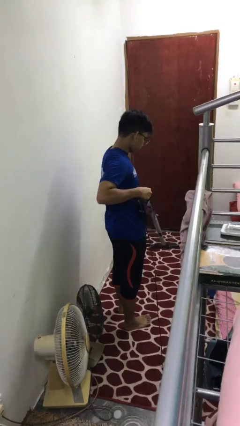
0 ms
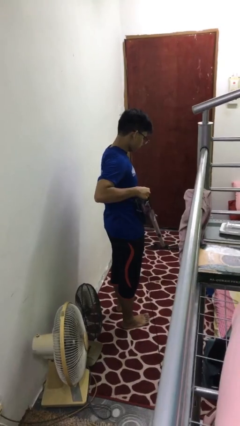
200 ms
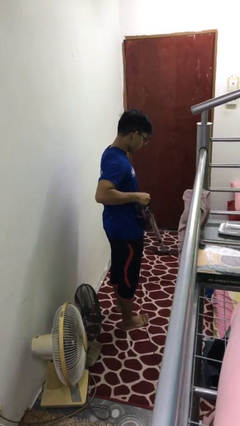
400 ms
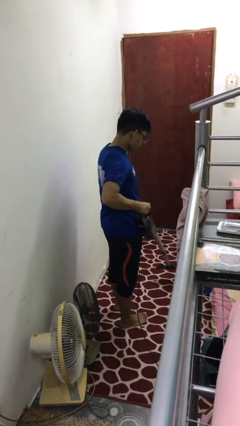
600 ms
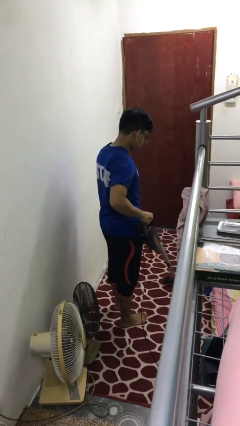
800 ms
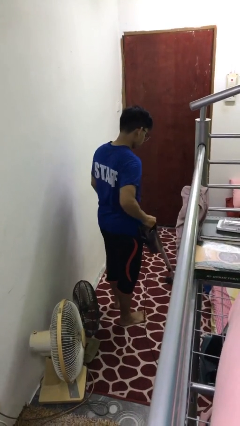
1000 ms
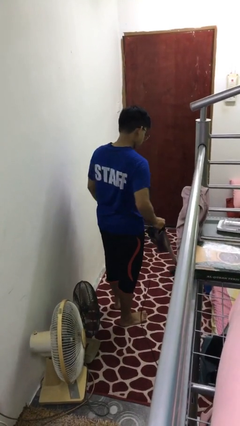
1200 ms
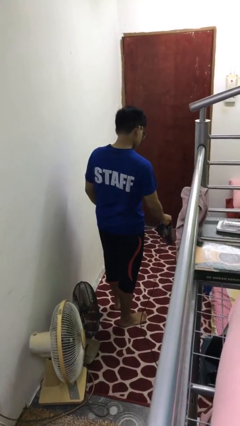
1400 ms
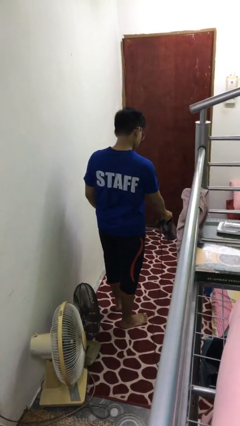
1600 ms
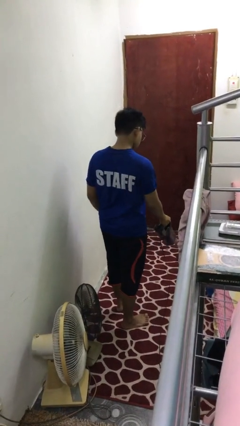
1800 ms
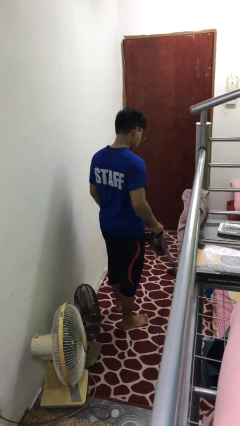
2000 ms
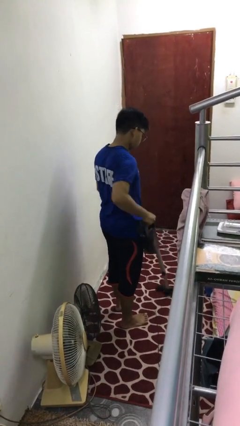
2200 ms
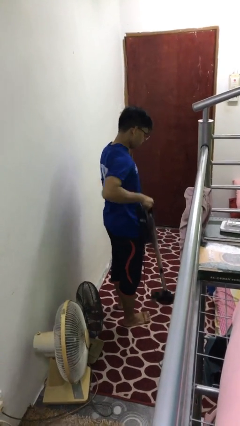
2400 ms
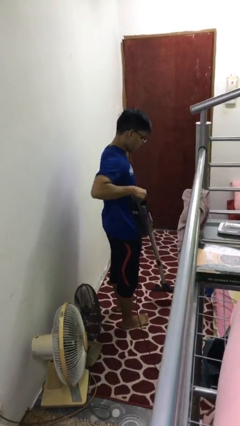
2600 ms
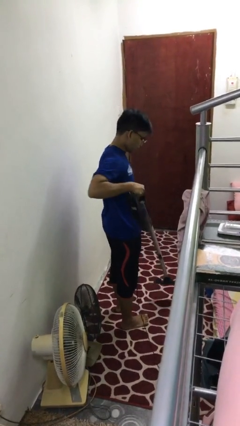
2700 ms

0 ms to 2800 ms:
person vacuums carpet

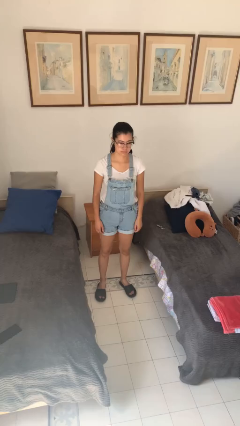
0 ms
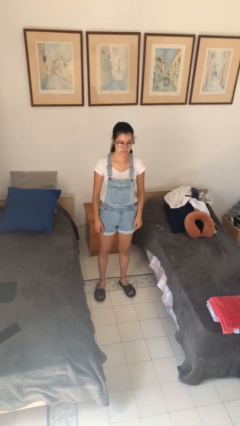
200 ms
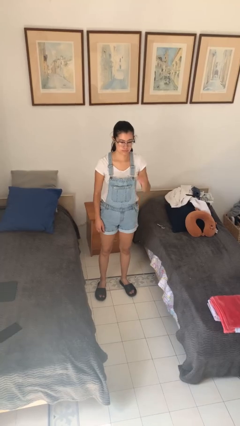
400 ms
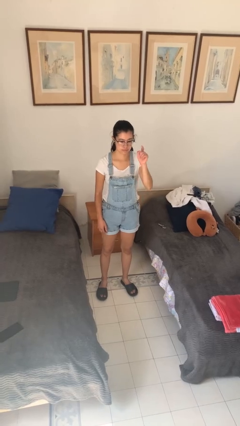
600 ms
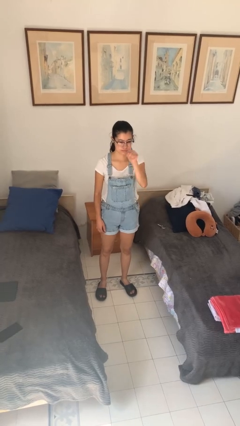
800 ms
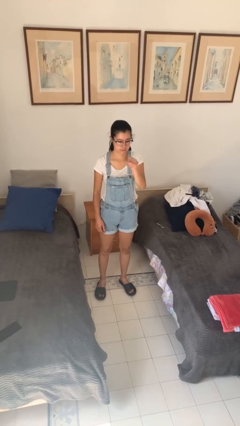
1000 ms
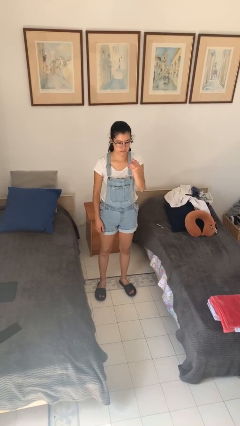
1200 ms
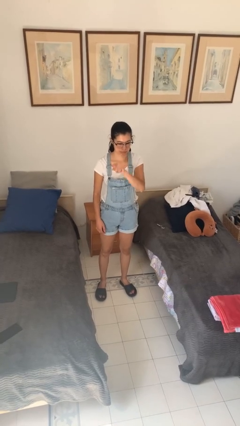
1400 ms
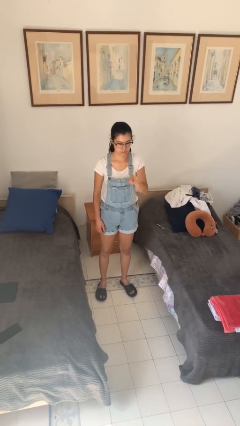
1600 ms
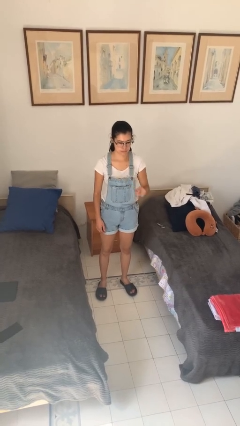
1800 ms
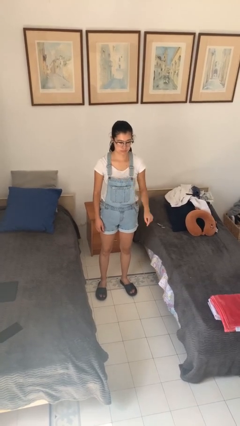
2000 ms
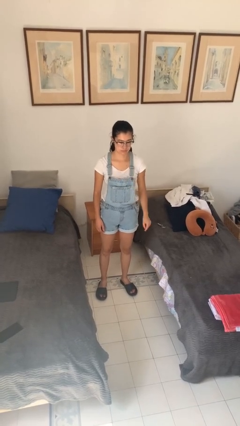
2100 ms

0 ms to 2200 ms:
person gestures number three

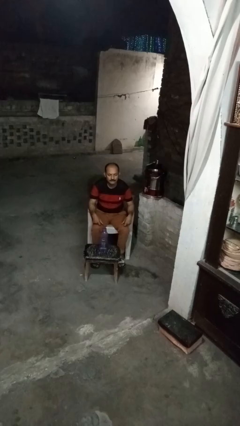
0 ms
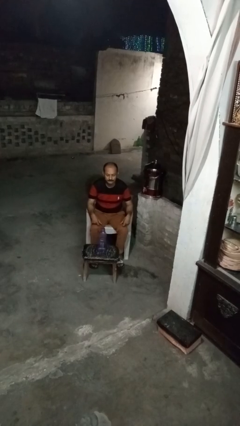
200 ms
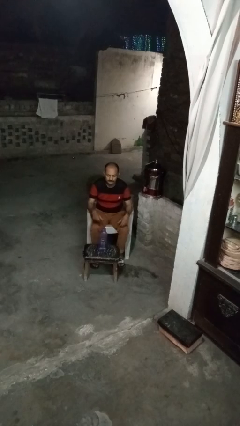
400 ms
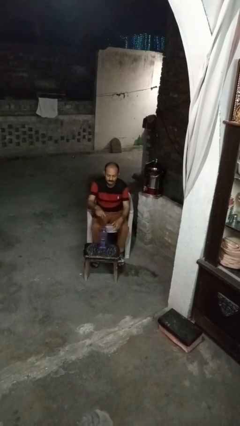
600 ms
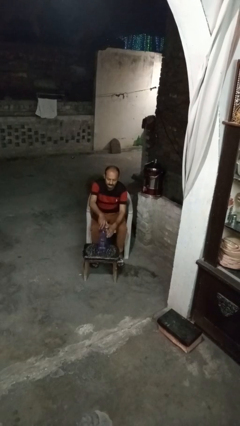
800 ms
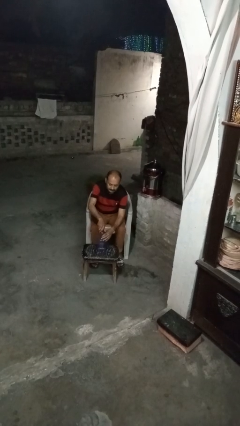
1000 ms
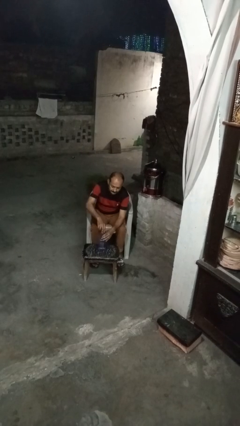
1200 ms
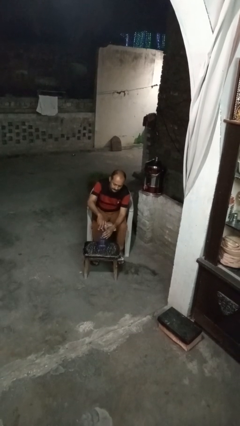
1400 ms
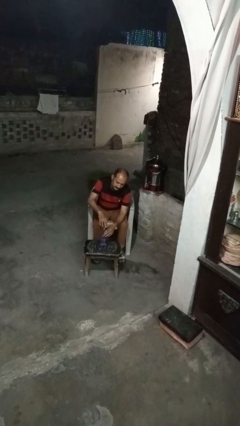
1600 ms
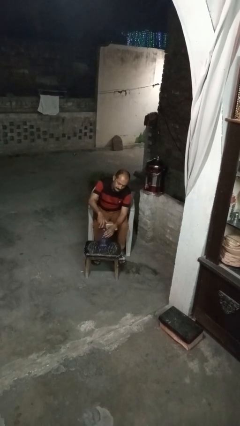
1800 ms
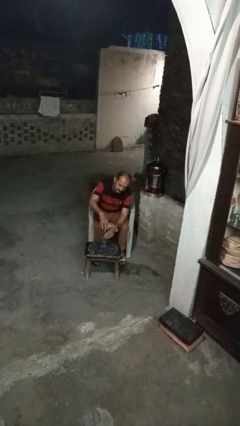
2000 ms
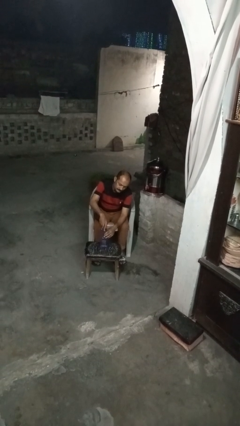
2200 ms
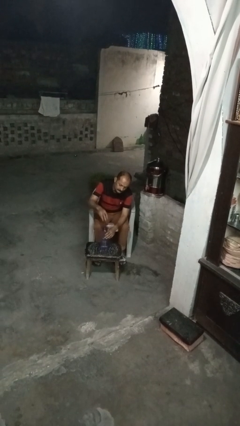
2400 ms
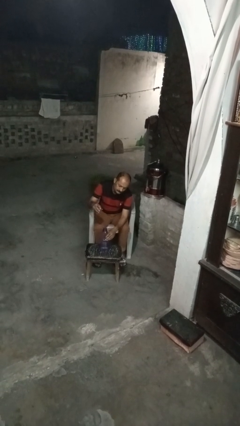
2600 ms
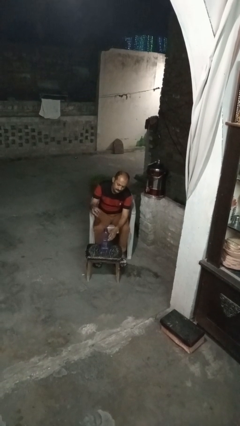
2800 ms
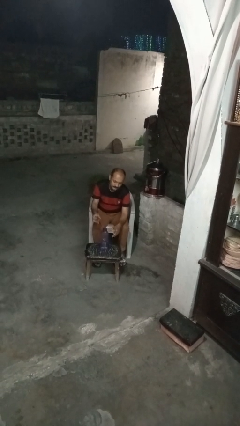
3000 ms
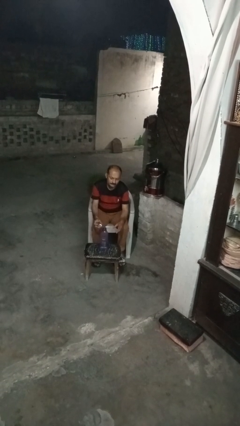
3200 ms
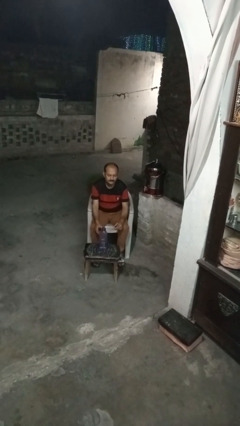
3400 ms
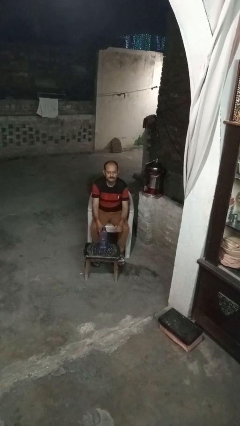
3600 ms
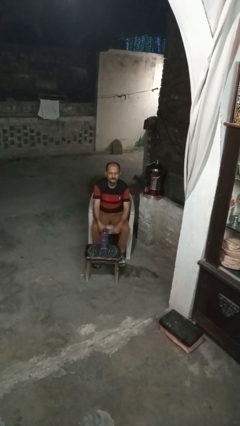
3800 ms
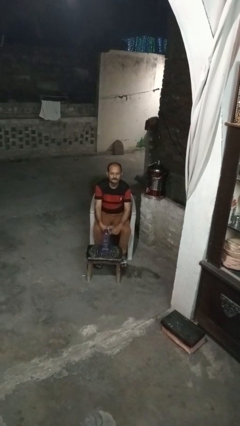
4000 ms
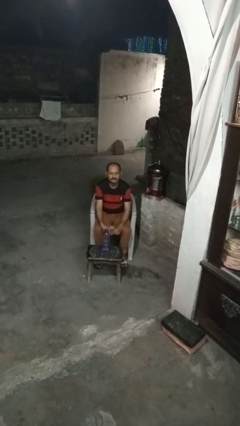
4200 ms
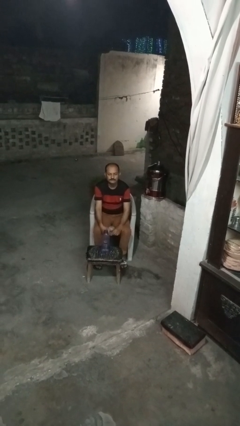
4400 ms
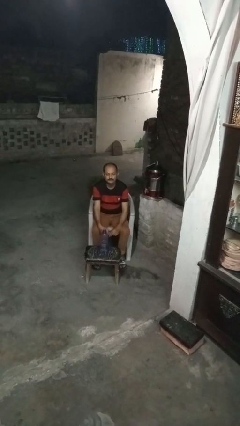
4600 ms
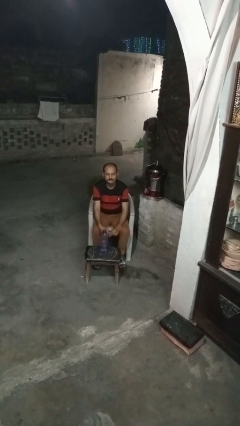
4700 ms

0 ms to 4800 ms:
person unscrews lid from bottle

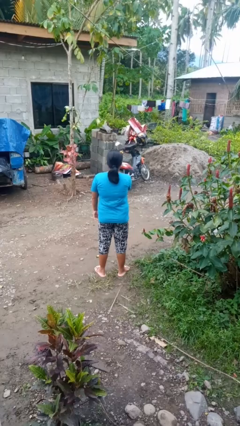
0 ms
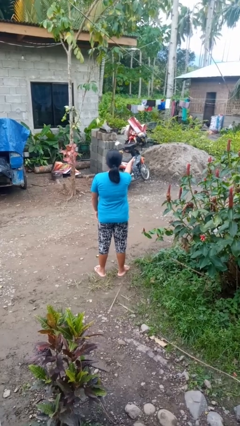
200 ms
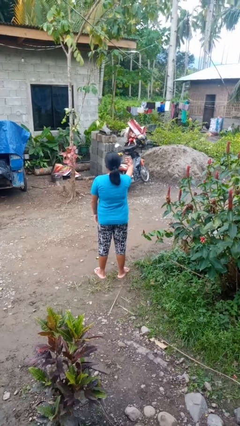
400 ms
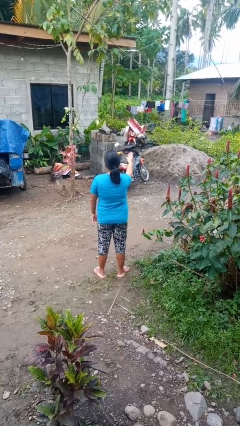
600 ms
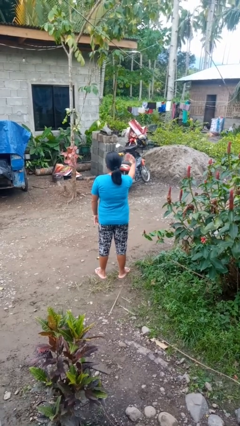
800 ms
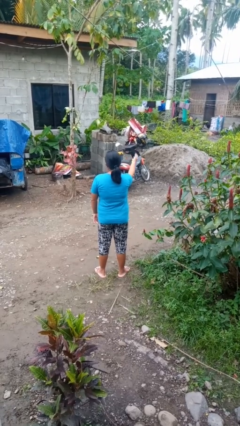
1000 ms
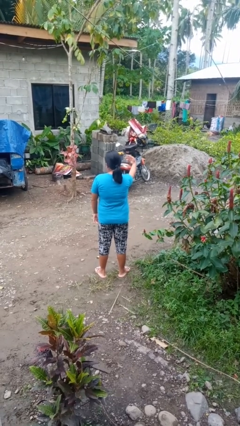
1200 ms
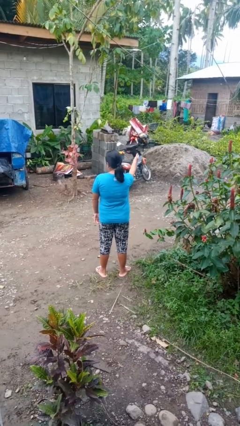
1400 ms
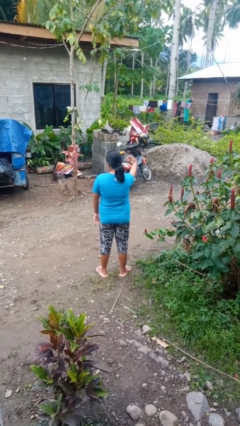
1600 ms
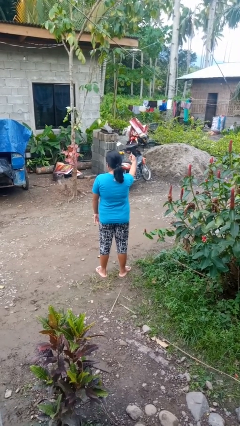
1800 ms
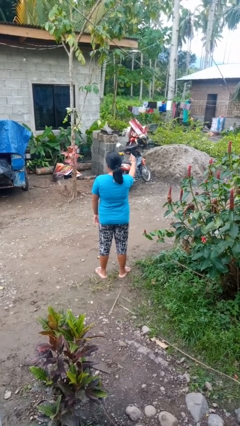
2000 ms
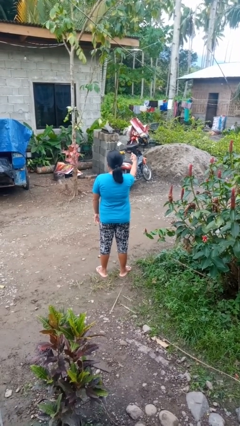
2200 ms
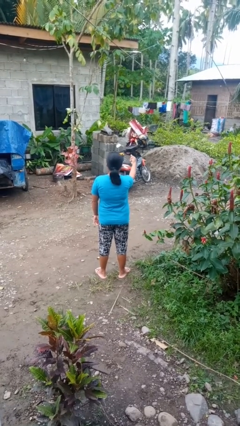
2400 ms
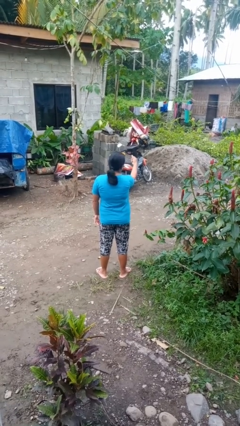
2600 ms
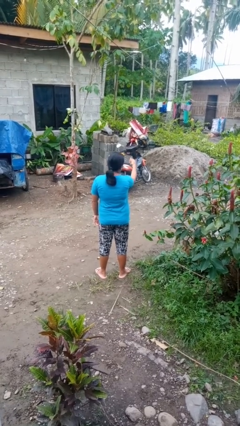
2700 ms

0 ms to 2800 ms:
person gestures come here

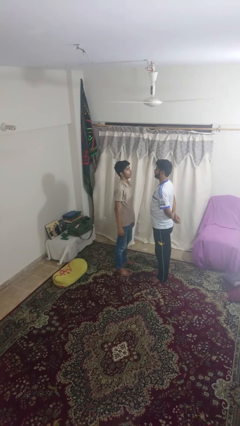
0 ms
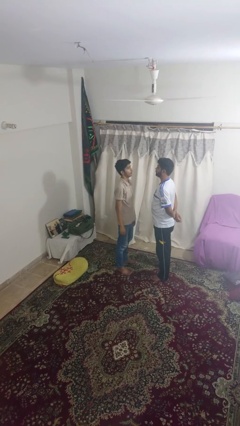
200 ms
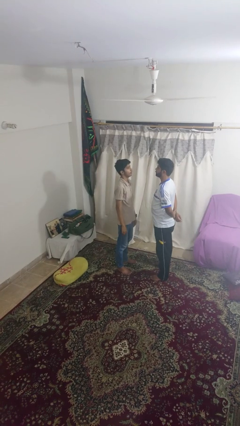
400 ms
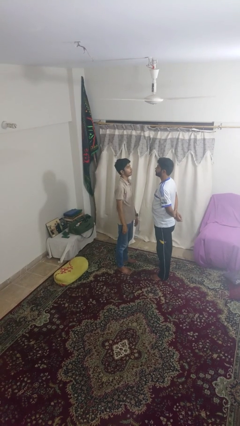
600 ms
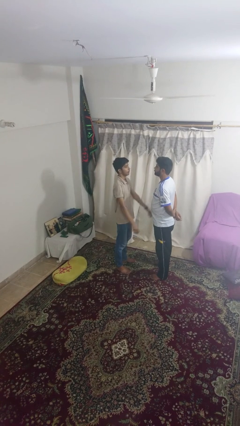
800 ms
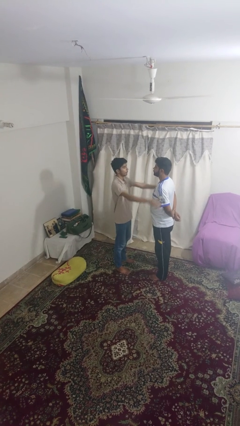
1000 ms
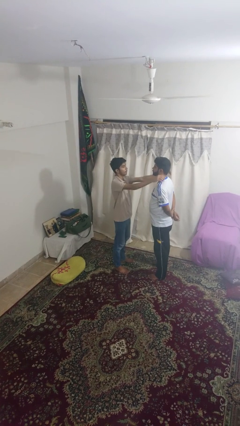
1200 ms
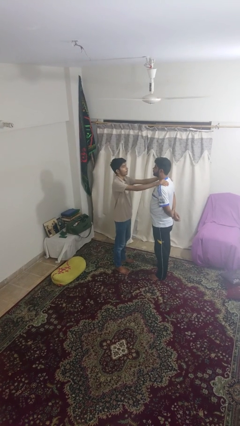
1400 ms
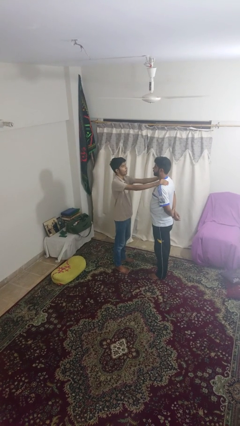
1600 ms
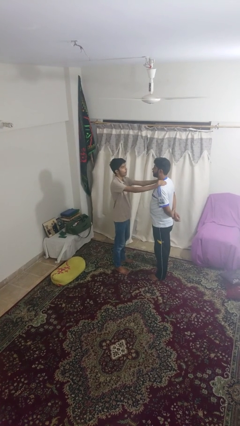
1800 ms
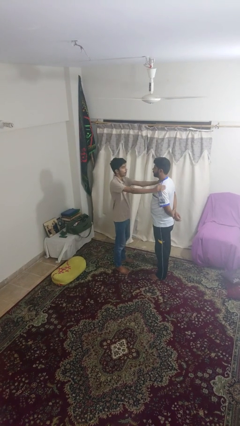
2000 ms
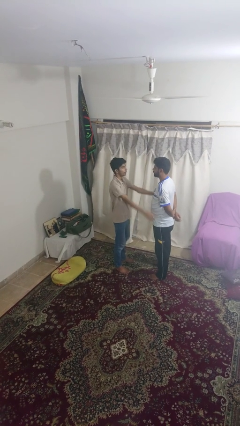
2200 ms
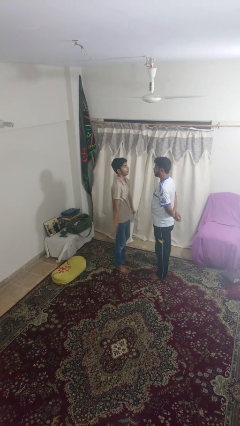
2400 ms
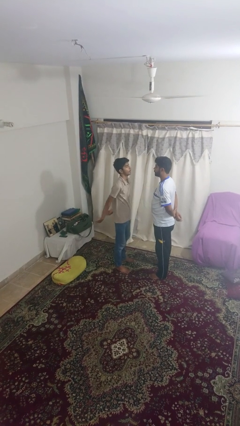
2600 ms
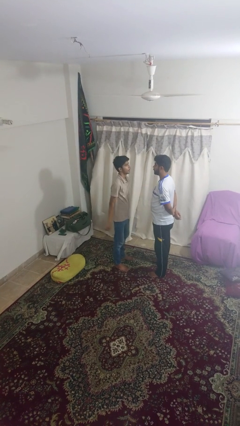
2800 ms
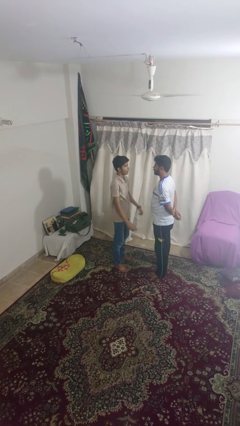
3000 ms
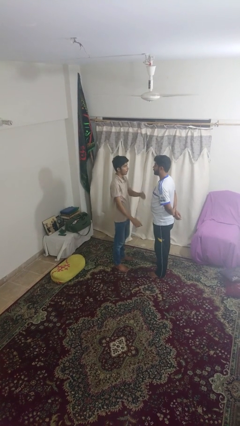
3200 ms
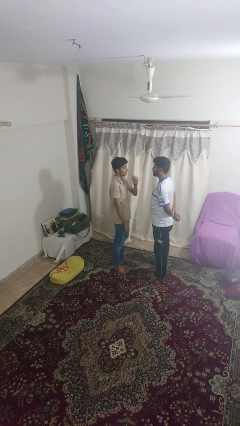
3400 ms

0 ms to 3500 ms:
person pounds shoulders of person

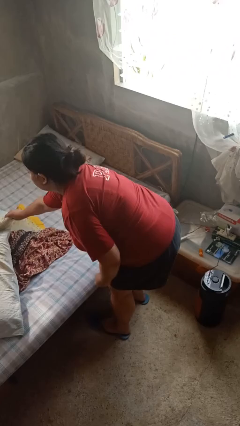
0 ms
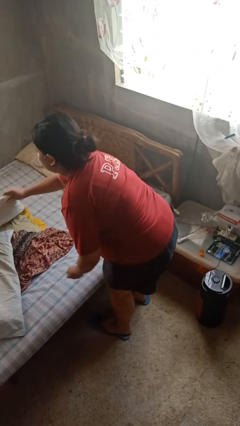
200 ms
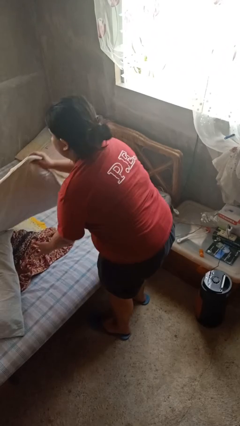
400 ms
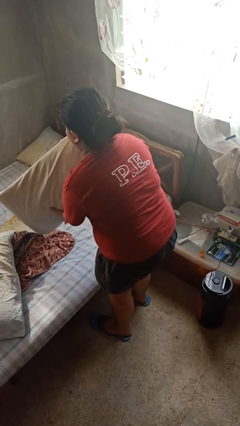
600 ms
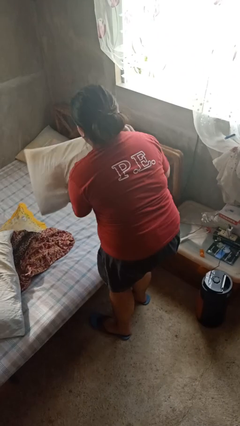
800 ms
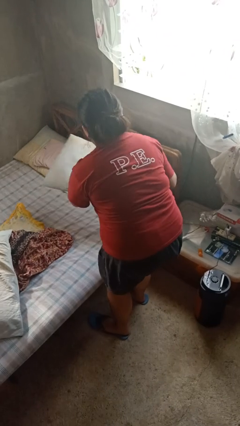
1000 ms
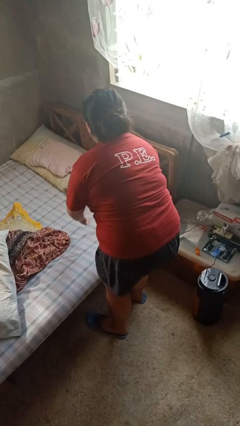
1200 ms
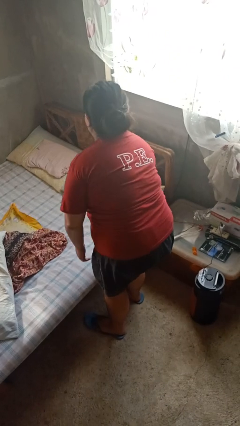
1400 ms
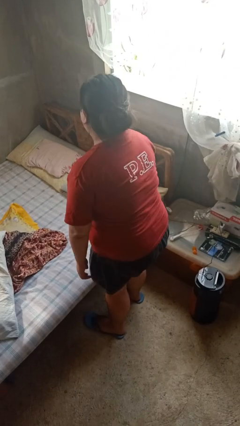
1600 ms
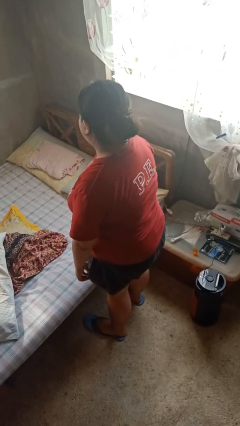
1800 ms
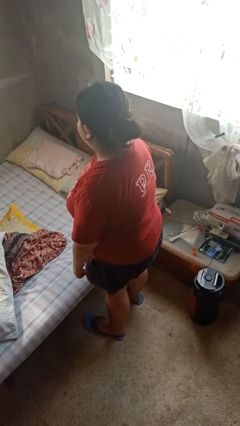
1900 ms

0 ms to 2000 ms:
person makes bed
